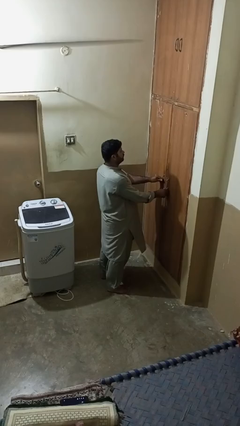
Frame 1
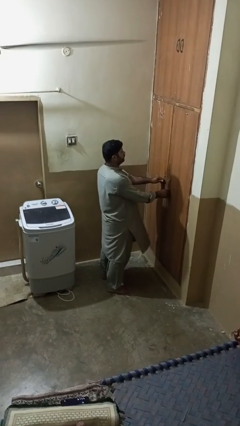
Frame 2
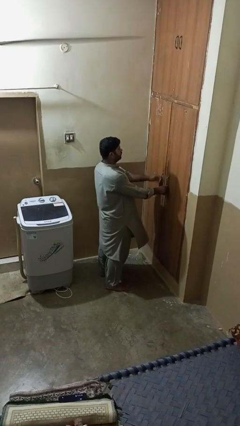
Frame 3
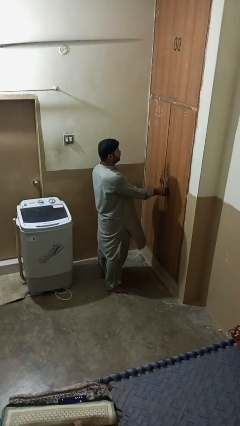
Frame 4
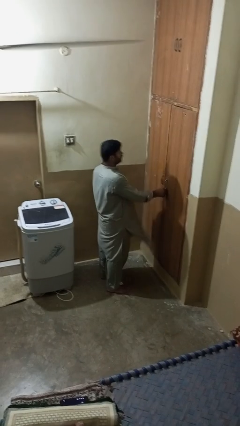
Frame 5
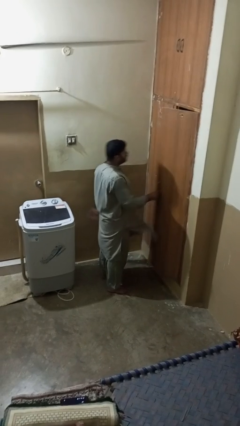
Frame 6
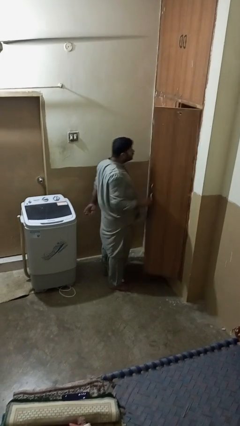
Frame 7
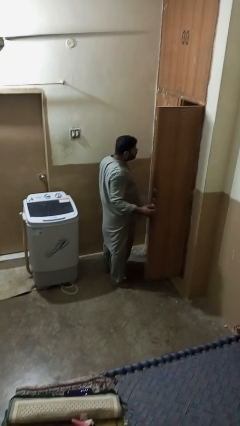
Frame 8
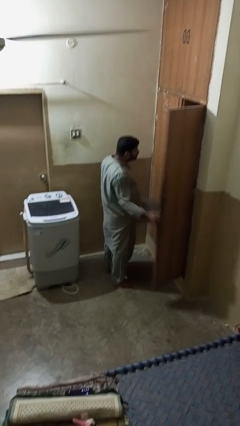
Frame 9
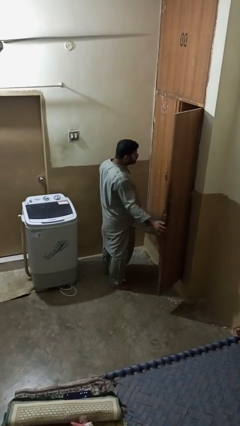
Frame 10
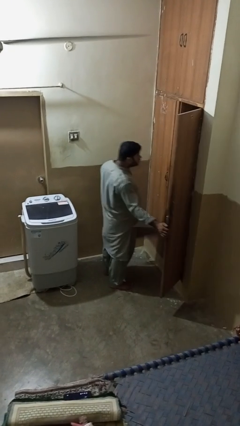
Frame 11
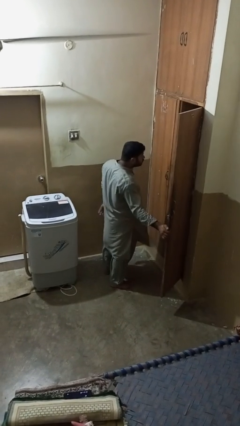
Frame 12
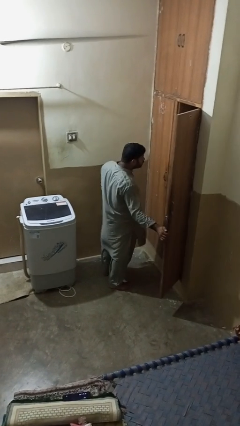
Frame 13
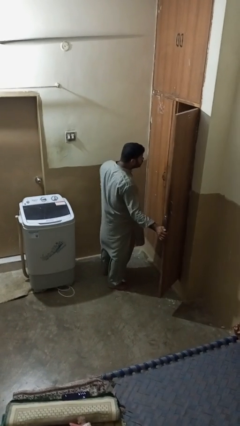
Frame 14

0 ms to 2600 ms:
person opens closet door

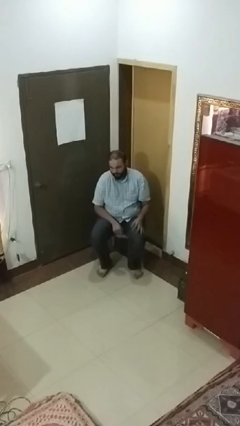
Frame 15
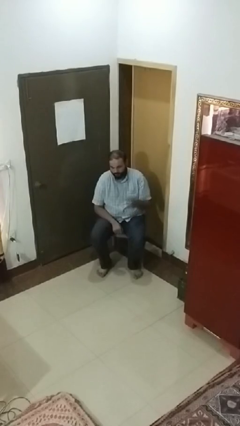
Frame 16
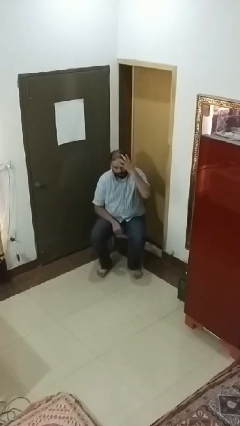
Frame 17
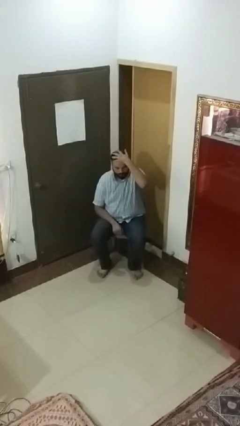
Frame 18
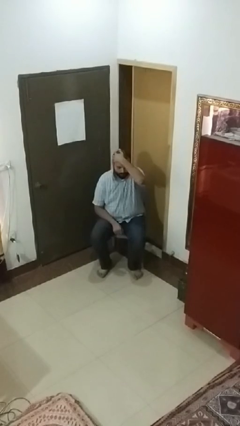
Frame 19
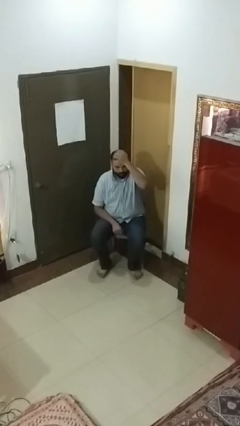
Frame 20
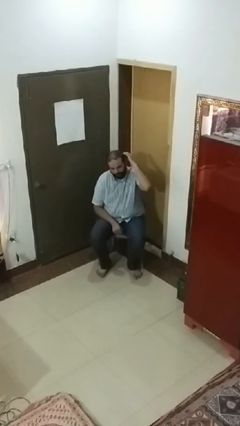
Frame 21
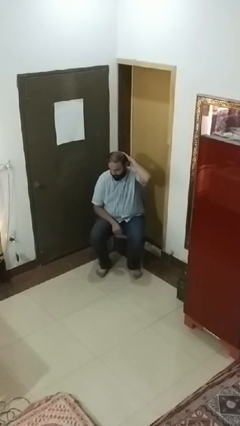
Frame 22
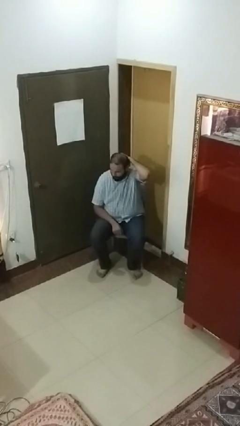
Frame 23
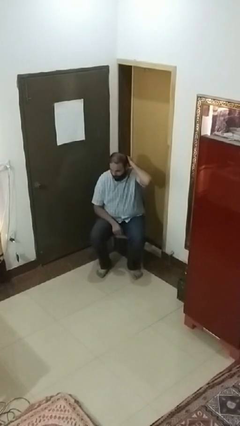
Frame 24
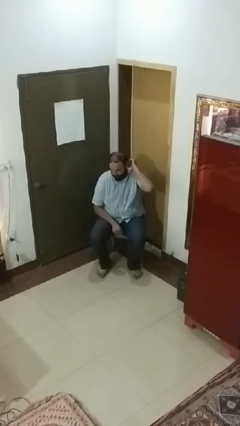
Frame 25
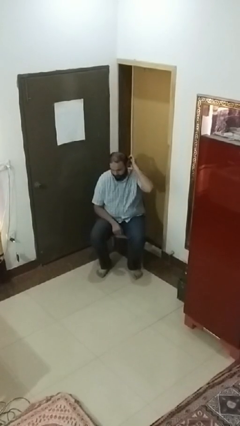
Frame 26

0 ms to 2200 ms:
person strokes hair

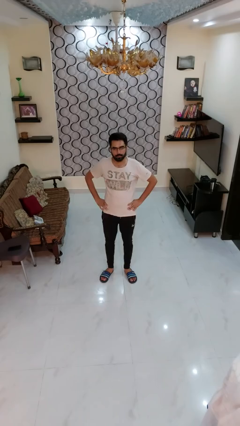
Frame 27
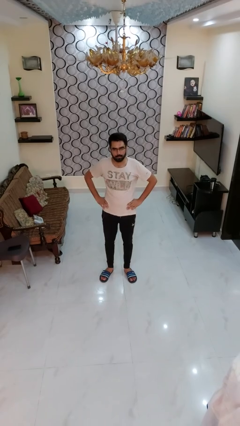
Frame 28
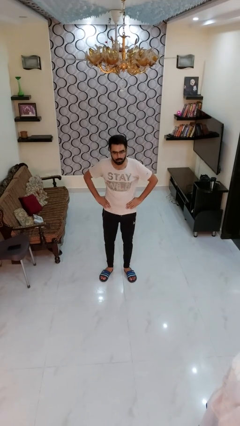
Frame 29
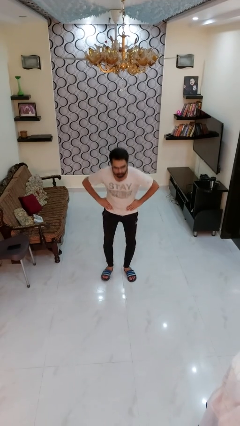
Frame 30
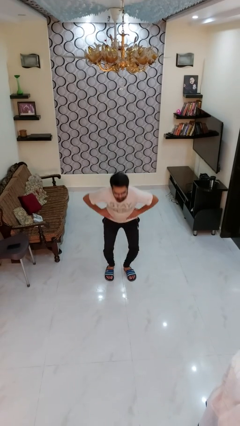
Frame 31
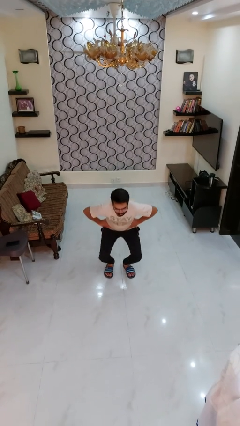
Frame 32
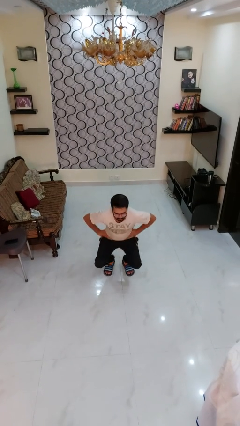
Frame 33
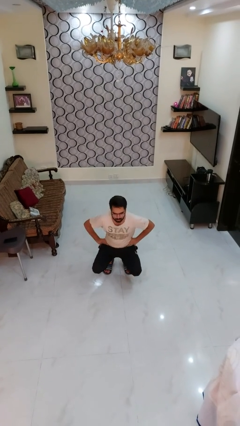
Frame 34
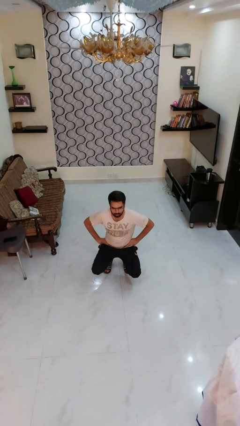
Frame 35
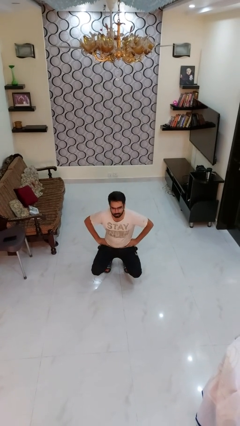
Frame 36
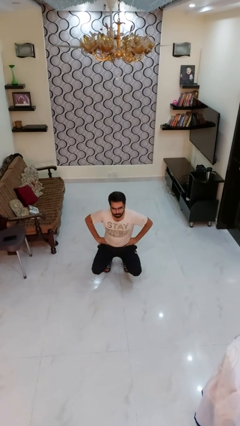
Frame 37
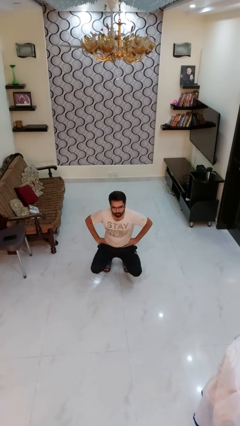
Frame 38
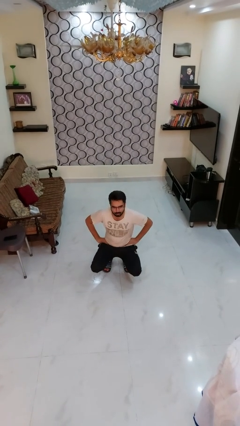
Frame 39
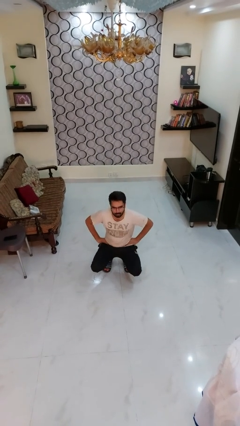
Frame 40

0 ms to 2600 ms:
person squats

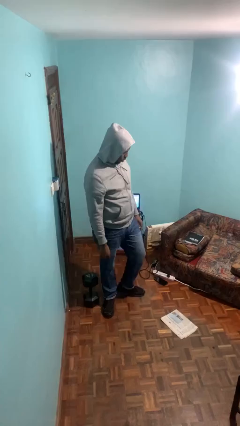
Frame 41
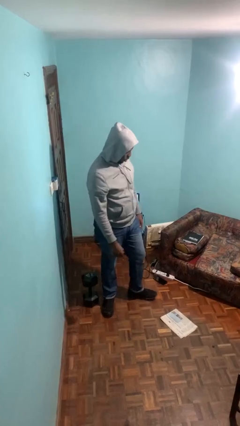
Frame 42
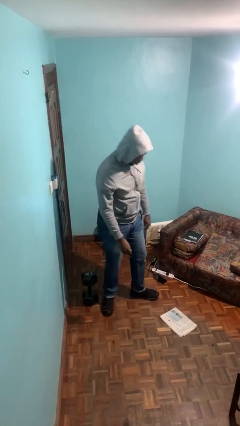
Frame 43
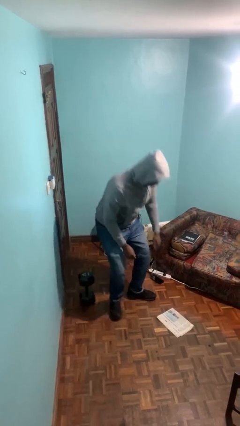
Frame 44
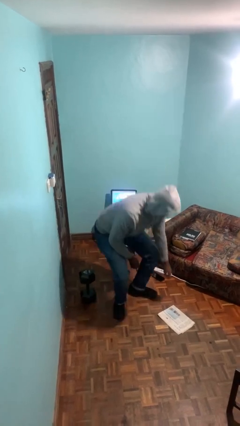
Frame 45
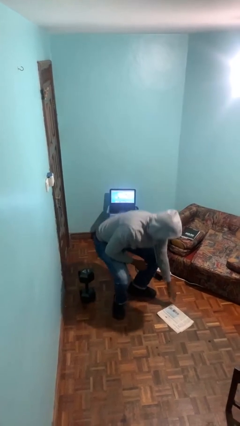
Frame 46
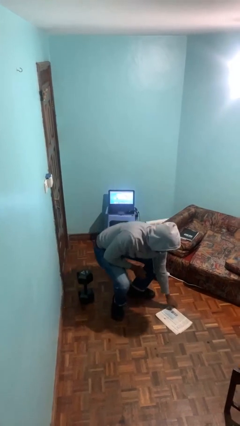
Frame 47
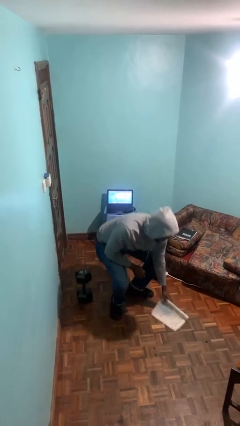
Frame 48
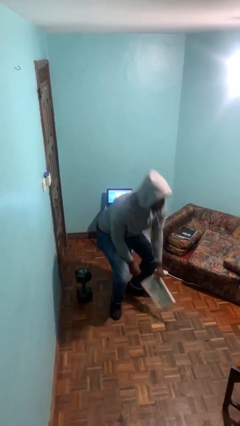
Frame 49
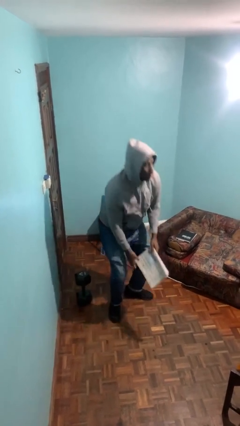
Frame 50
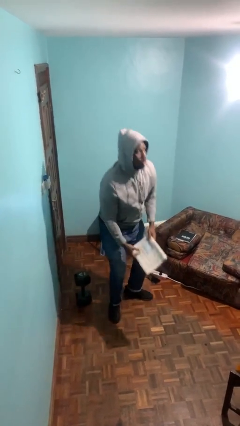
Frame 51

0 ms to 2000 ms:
person picks up object from floor

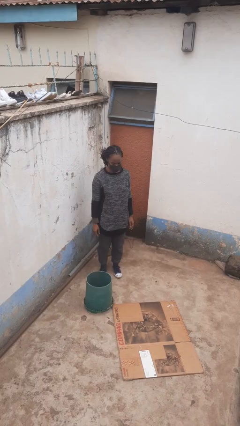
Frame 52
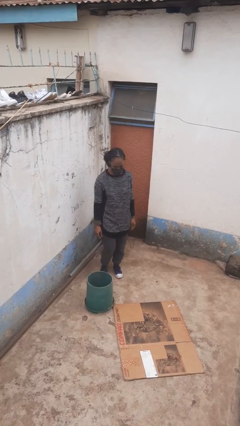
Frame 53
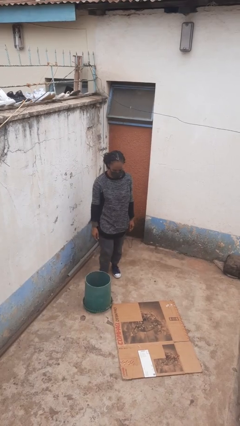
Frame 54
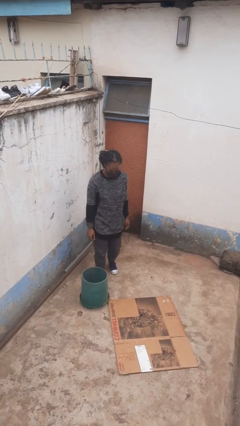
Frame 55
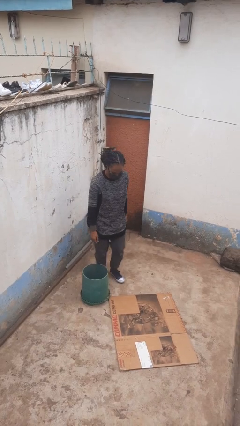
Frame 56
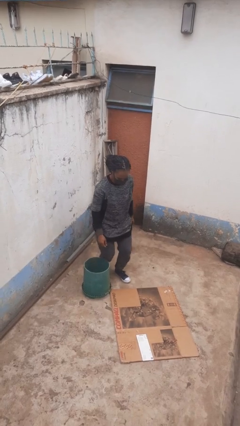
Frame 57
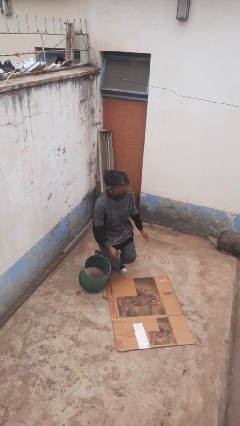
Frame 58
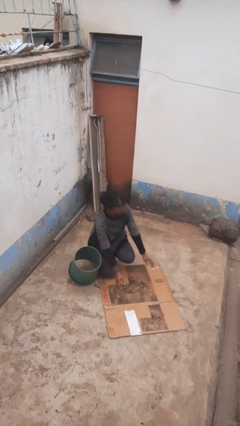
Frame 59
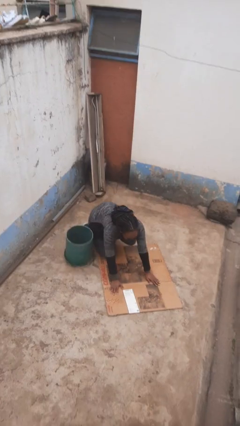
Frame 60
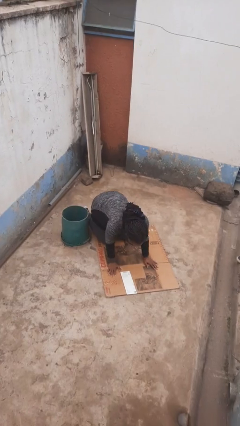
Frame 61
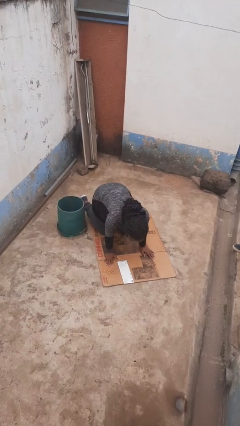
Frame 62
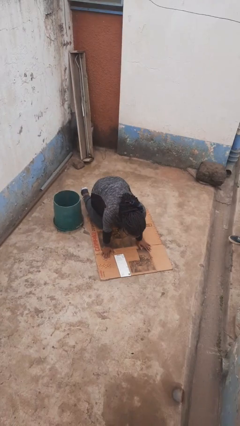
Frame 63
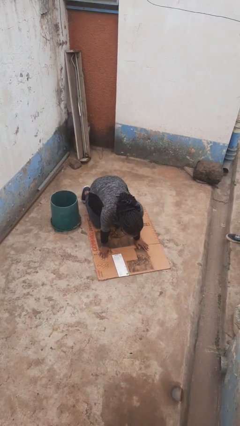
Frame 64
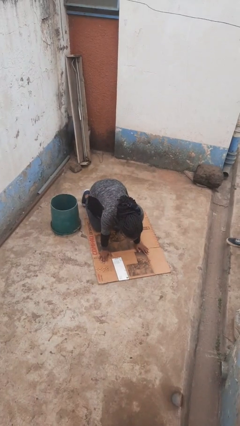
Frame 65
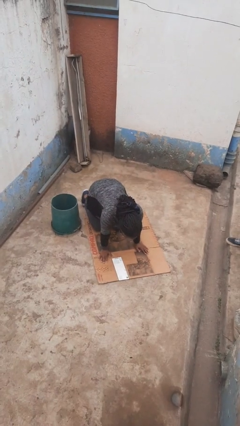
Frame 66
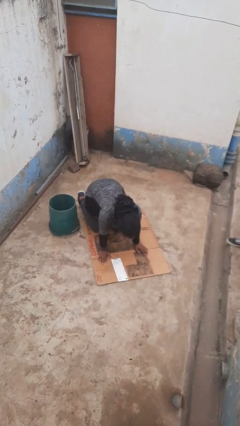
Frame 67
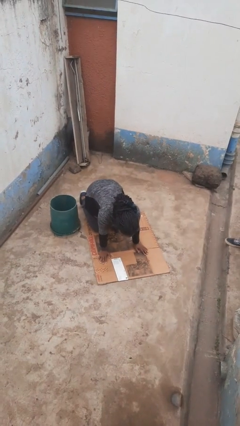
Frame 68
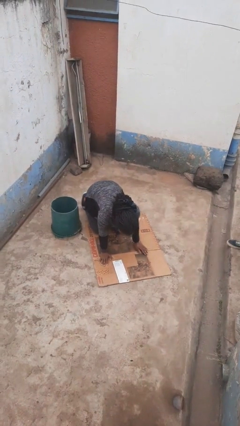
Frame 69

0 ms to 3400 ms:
person trips on object on floor

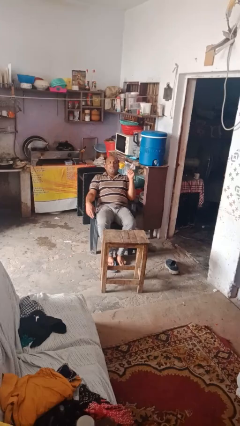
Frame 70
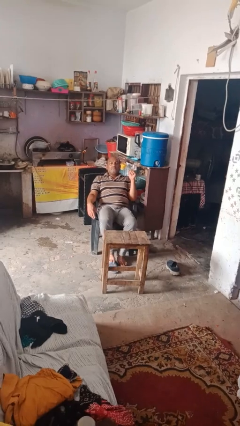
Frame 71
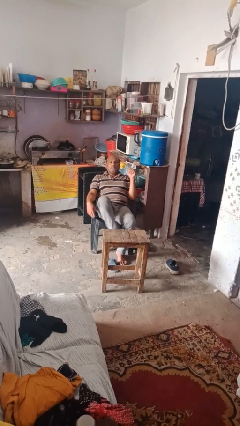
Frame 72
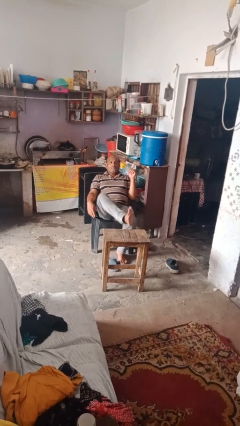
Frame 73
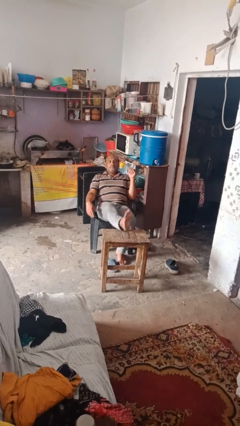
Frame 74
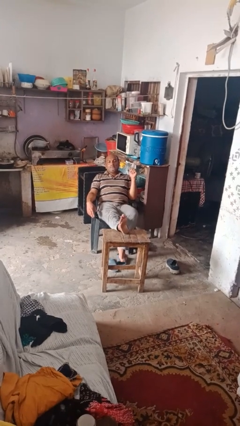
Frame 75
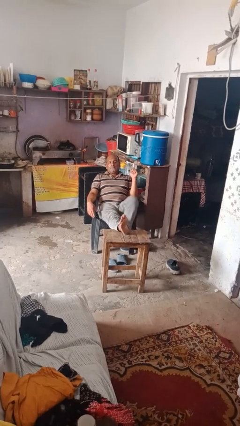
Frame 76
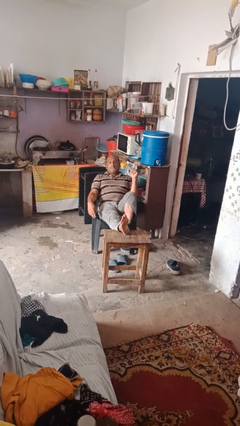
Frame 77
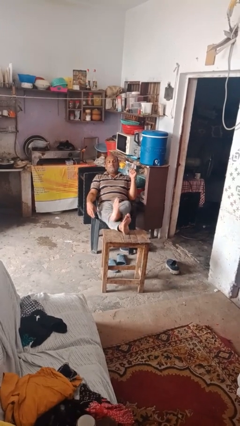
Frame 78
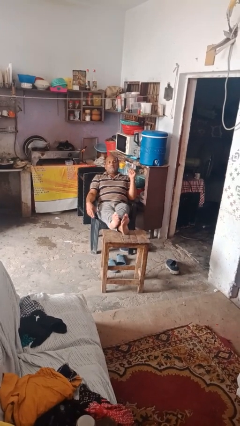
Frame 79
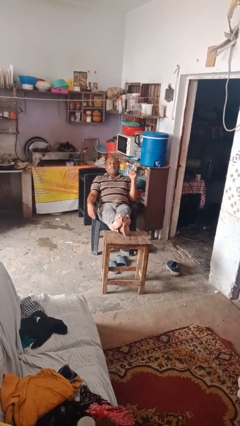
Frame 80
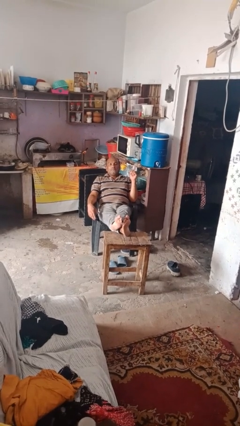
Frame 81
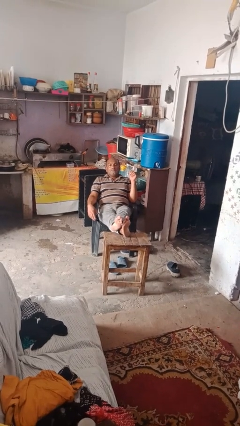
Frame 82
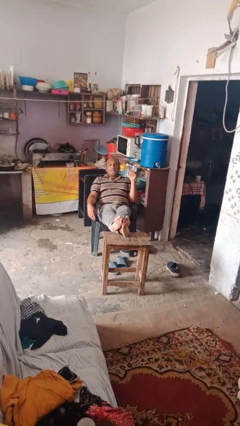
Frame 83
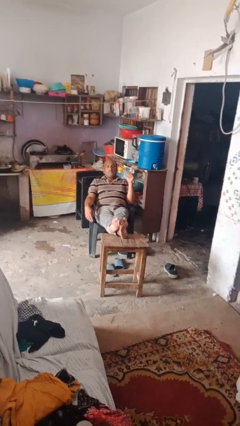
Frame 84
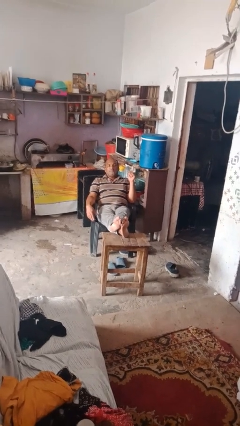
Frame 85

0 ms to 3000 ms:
person puts feet up

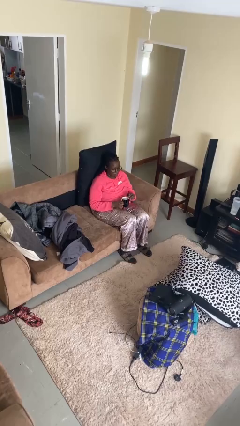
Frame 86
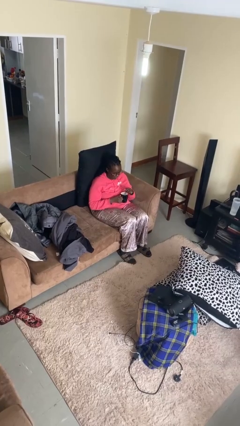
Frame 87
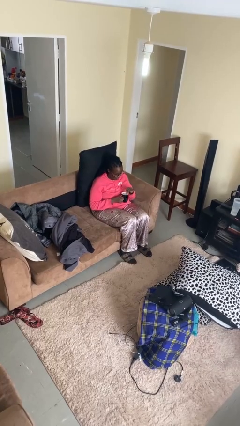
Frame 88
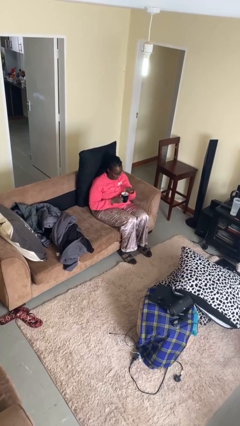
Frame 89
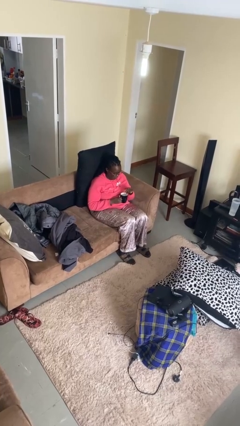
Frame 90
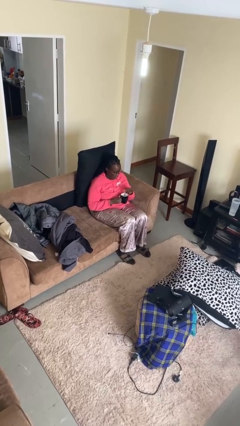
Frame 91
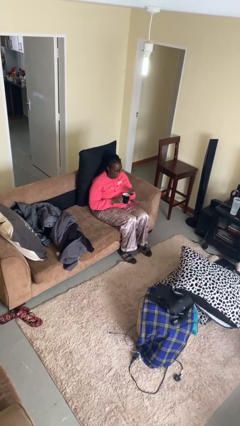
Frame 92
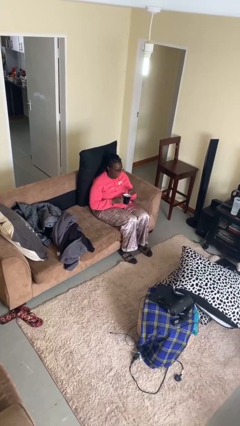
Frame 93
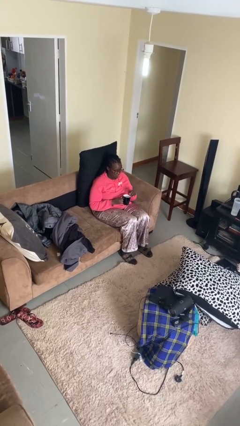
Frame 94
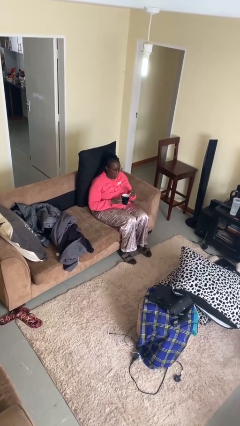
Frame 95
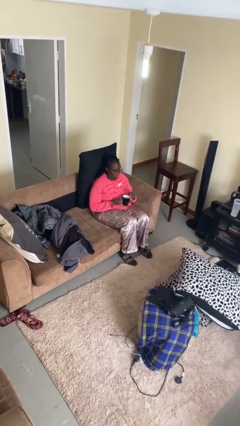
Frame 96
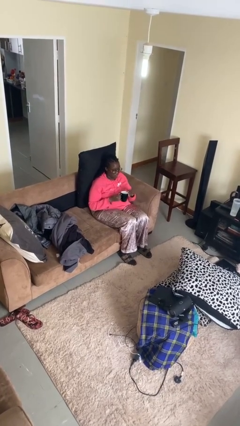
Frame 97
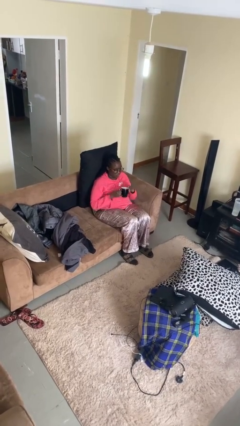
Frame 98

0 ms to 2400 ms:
person stirs mug
